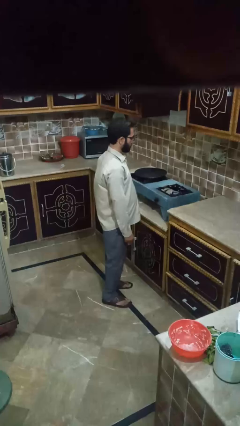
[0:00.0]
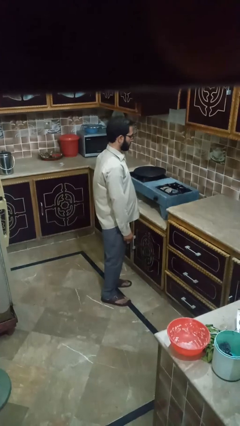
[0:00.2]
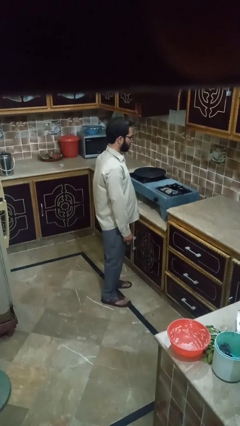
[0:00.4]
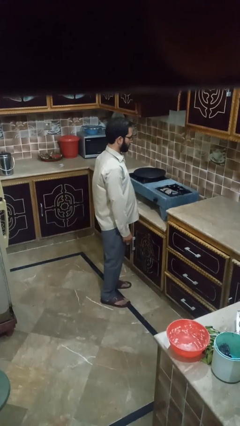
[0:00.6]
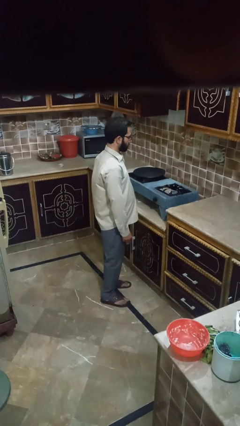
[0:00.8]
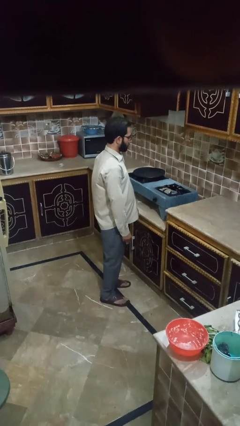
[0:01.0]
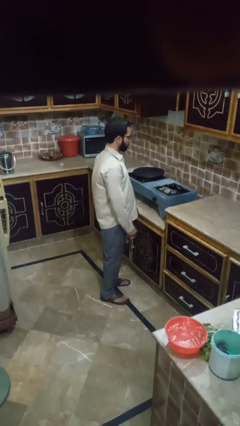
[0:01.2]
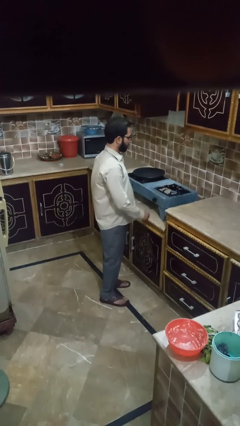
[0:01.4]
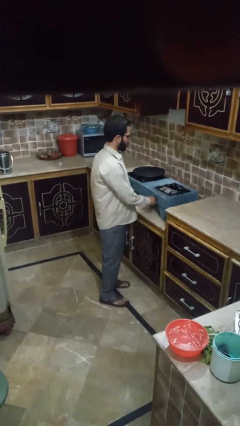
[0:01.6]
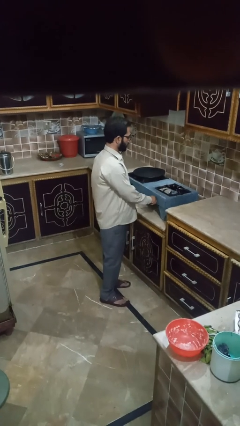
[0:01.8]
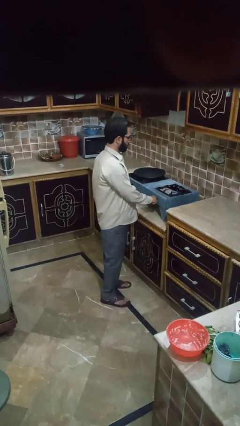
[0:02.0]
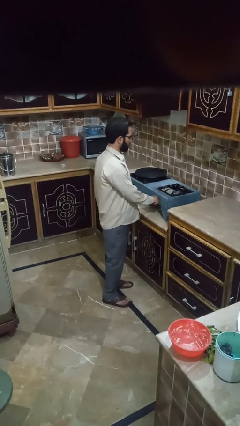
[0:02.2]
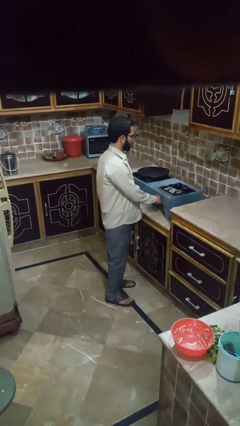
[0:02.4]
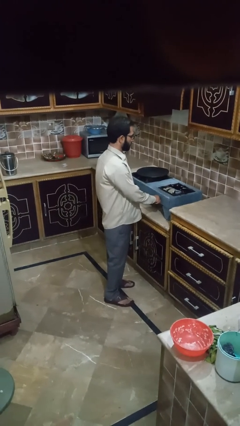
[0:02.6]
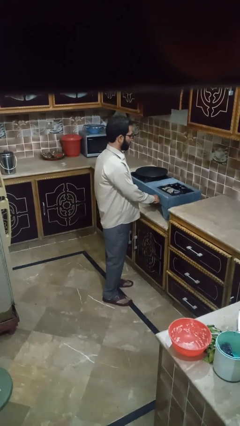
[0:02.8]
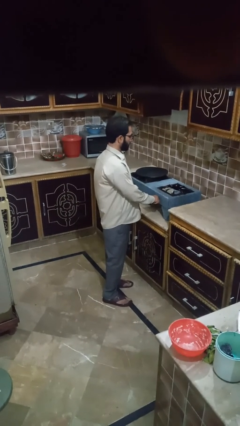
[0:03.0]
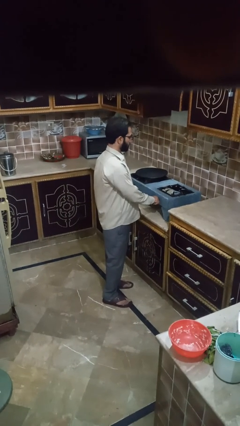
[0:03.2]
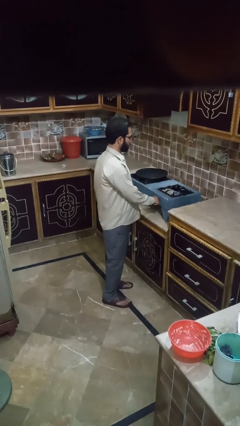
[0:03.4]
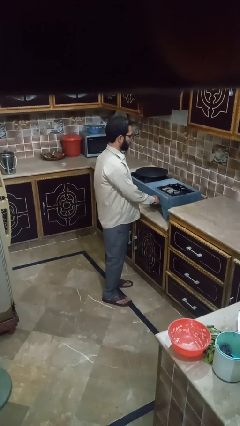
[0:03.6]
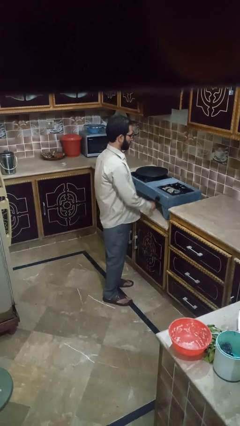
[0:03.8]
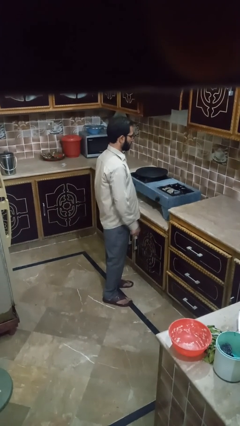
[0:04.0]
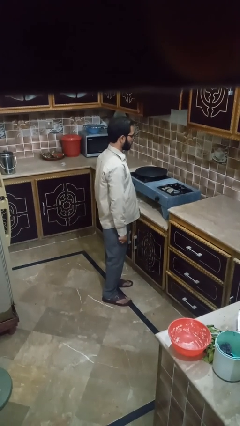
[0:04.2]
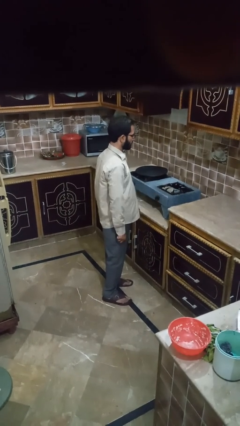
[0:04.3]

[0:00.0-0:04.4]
person turns on stovetop

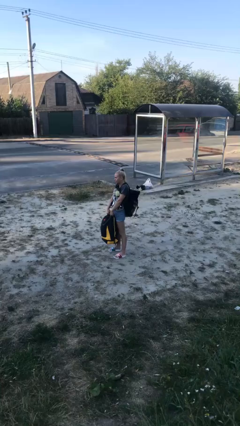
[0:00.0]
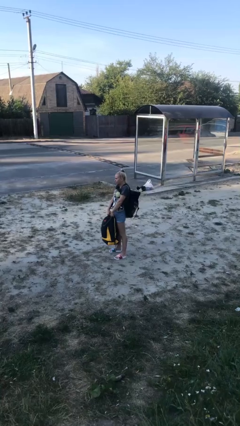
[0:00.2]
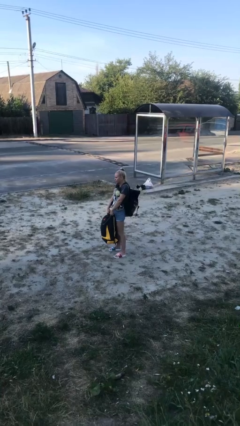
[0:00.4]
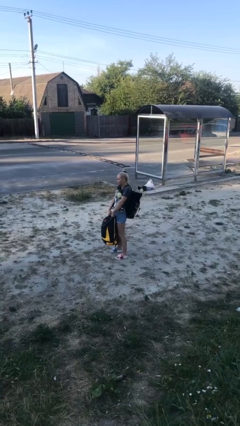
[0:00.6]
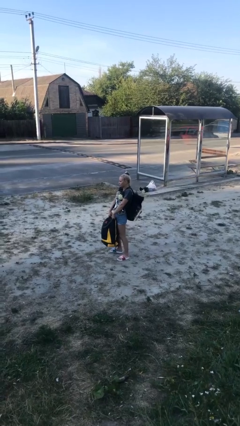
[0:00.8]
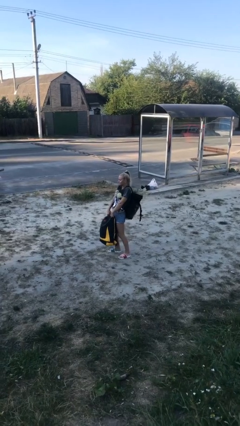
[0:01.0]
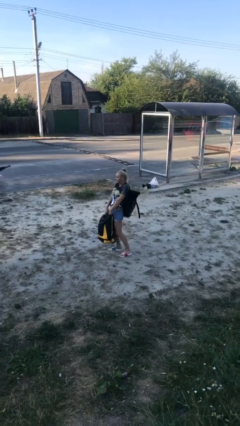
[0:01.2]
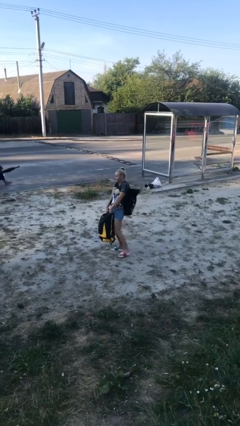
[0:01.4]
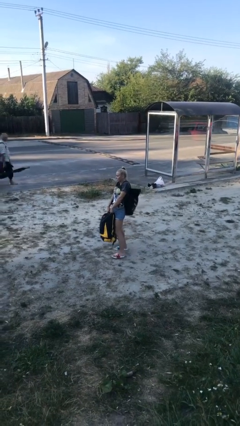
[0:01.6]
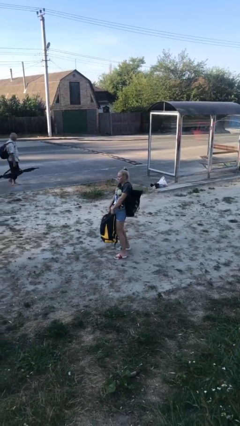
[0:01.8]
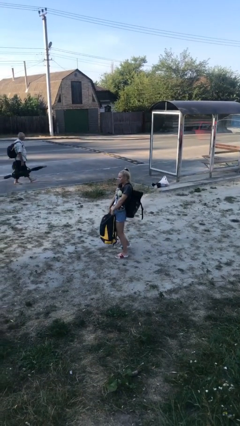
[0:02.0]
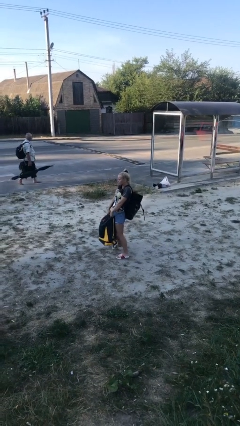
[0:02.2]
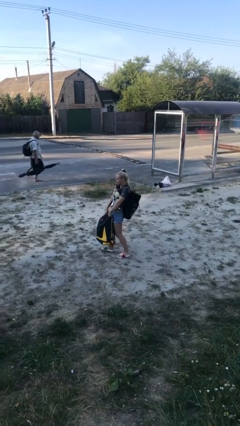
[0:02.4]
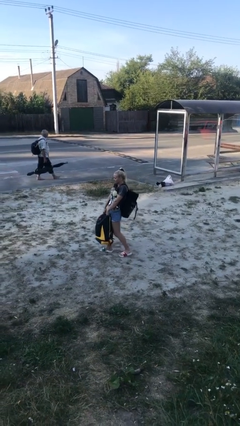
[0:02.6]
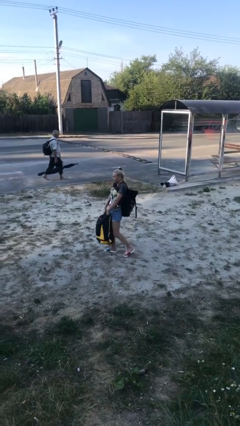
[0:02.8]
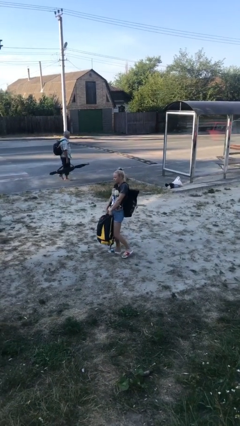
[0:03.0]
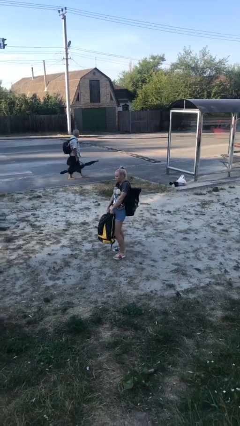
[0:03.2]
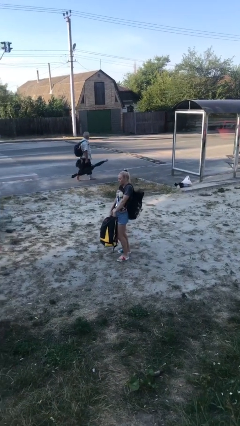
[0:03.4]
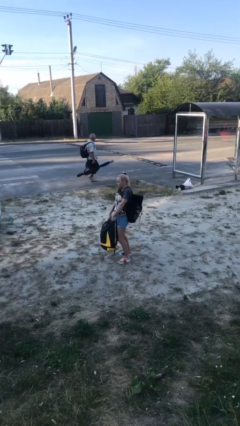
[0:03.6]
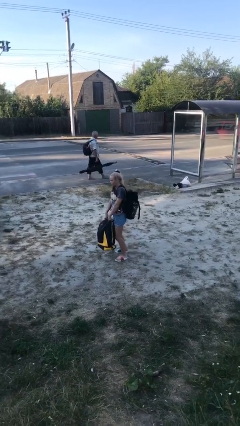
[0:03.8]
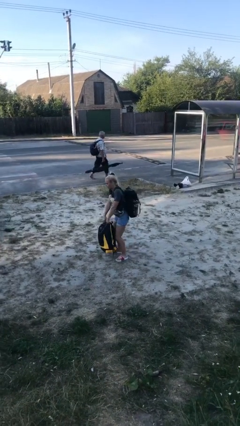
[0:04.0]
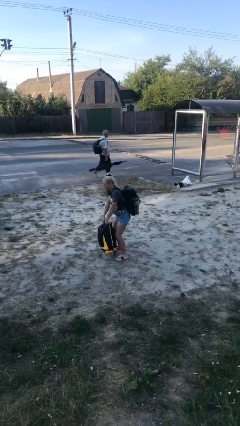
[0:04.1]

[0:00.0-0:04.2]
person carries heavy object

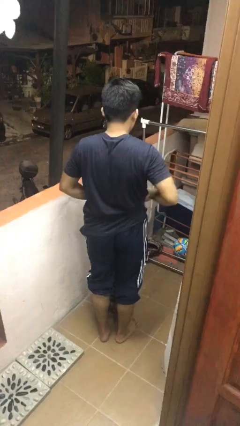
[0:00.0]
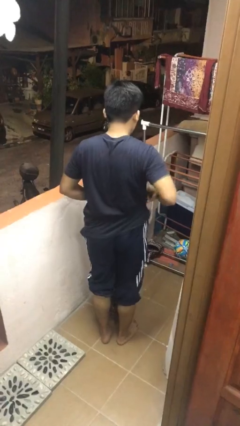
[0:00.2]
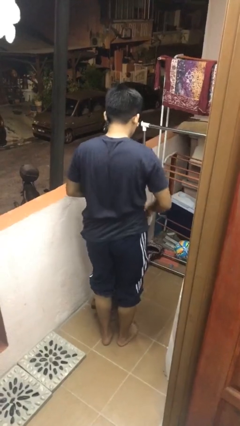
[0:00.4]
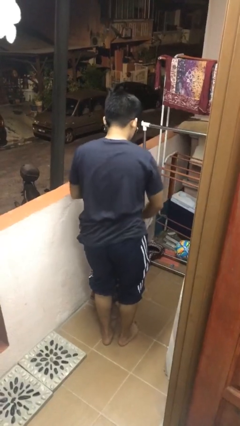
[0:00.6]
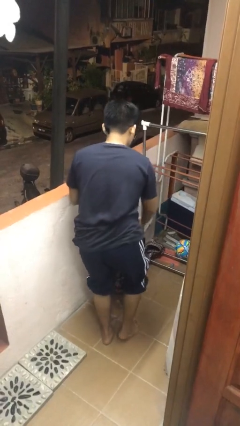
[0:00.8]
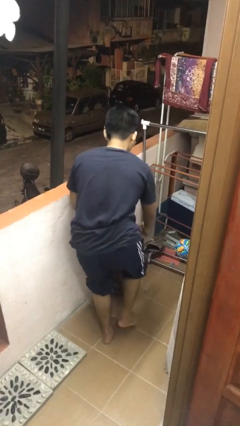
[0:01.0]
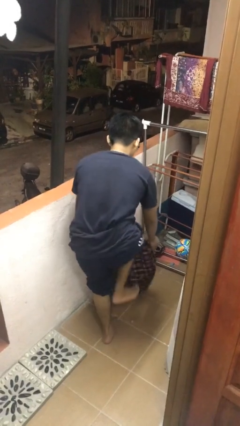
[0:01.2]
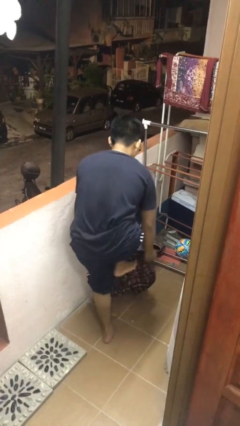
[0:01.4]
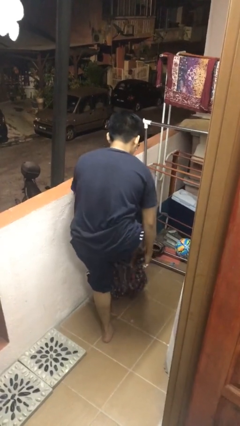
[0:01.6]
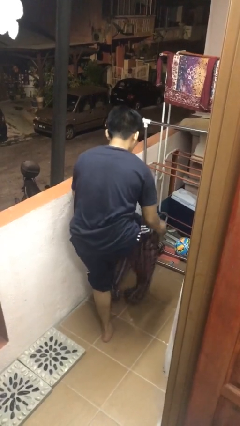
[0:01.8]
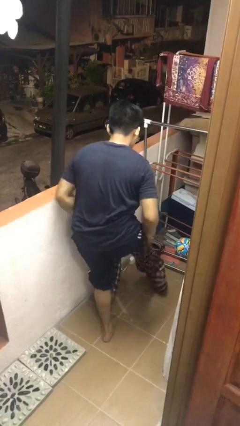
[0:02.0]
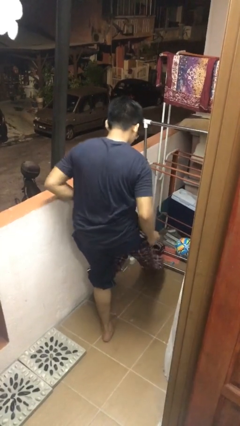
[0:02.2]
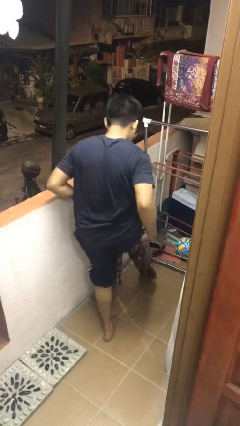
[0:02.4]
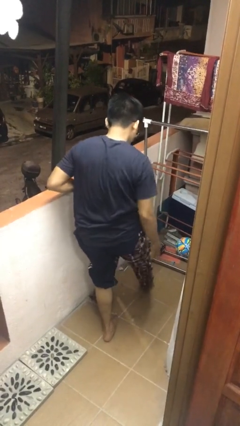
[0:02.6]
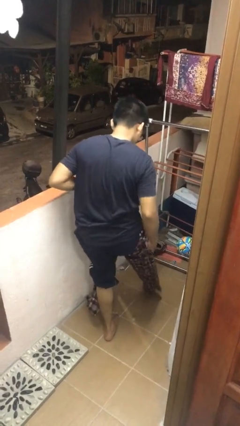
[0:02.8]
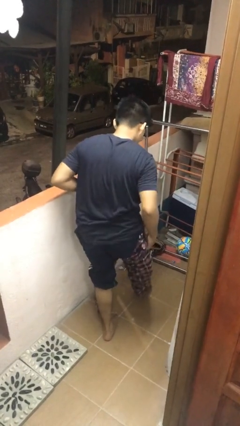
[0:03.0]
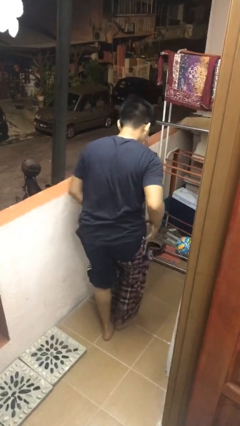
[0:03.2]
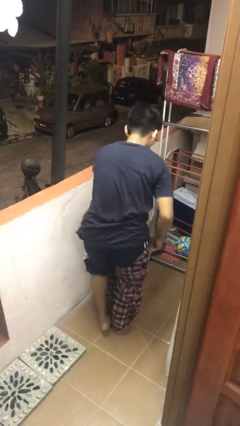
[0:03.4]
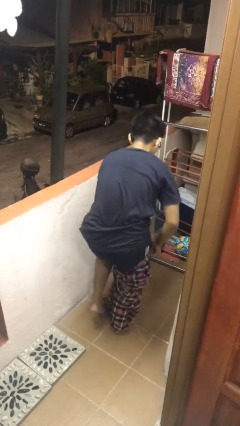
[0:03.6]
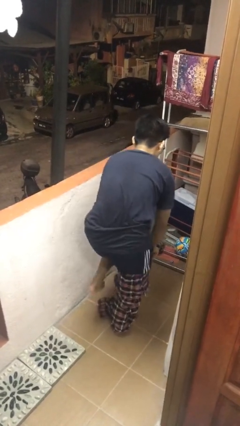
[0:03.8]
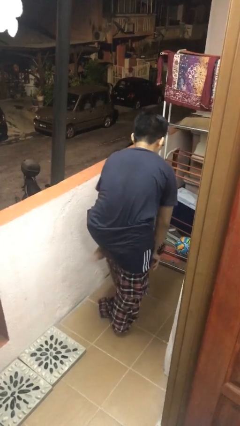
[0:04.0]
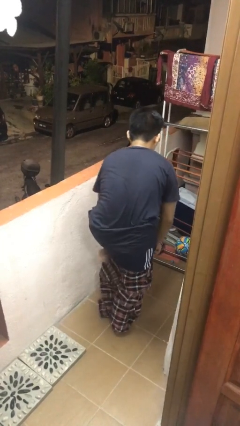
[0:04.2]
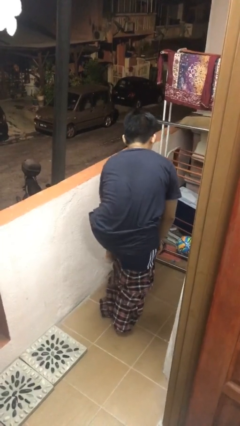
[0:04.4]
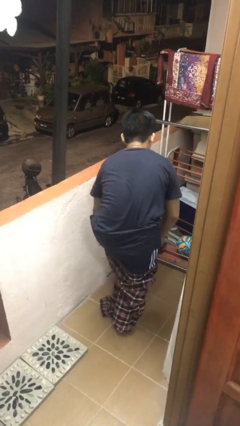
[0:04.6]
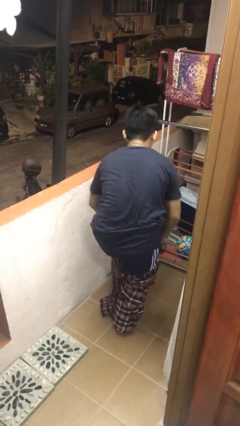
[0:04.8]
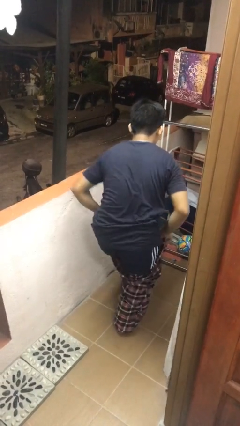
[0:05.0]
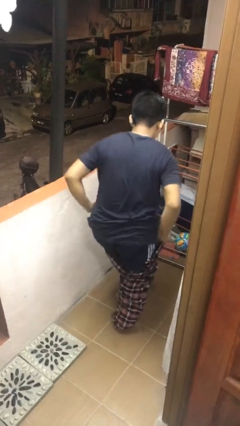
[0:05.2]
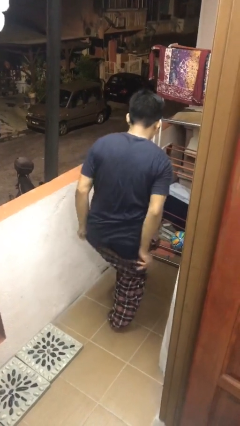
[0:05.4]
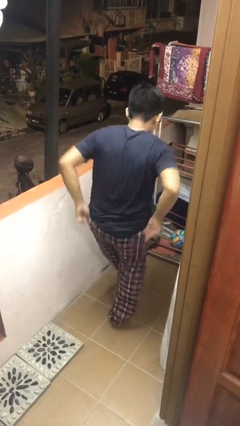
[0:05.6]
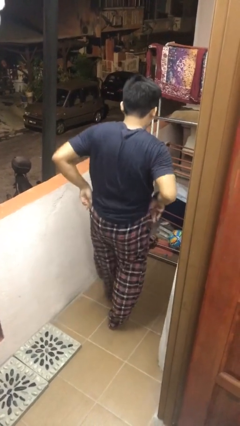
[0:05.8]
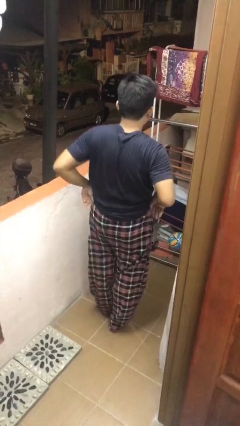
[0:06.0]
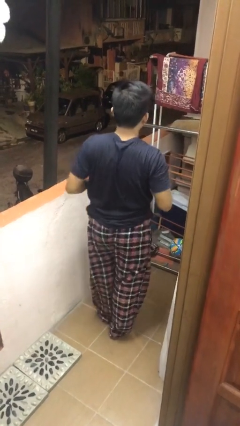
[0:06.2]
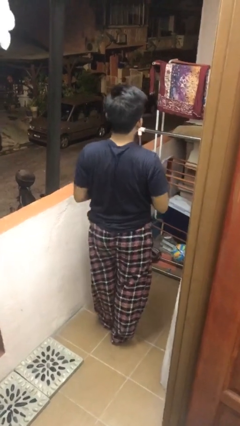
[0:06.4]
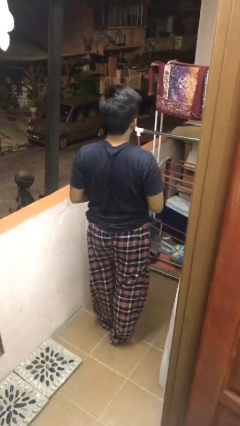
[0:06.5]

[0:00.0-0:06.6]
person puts on pants

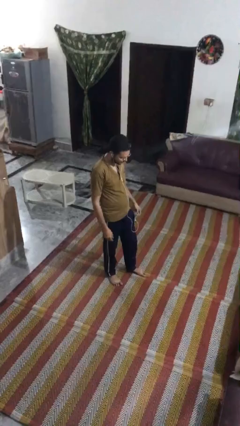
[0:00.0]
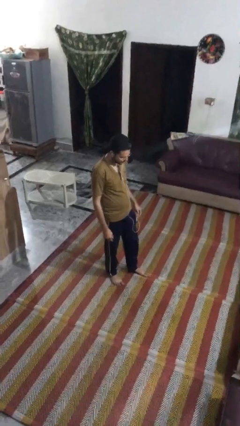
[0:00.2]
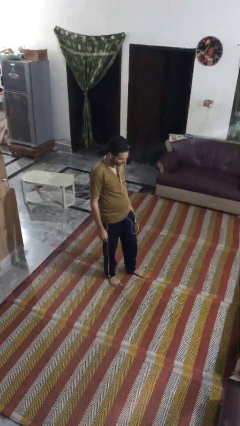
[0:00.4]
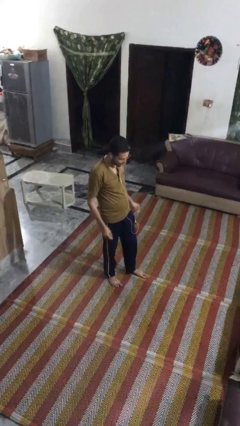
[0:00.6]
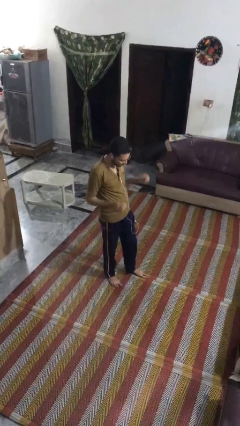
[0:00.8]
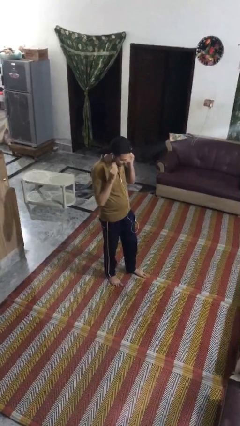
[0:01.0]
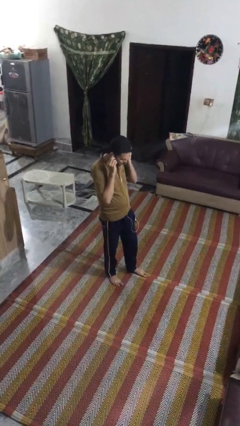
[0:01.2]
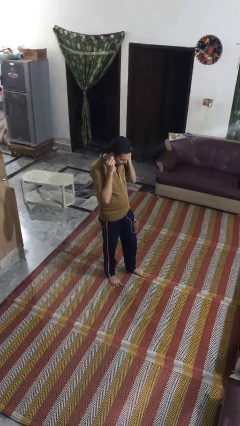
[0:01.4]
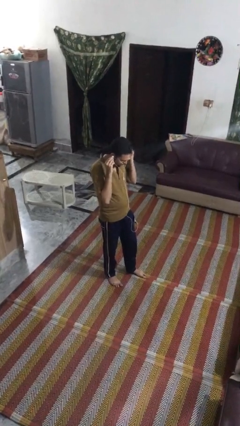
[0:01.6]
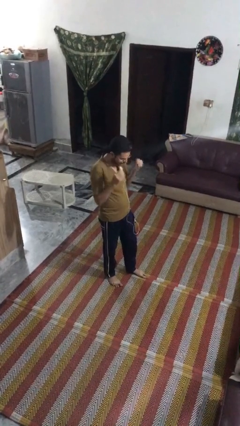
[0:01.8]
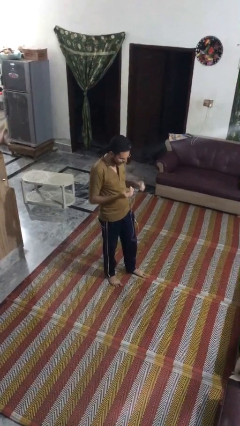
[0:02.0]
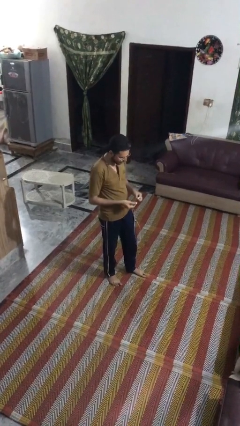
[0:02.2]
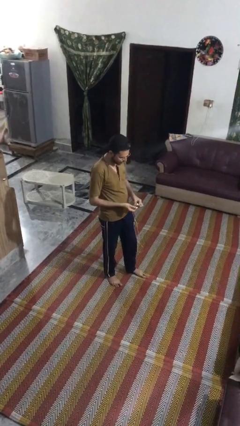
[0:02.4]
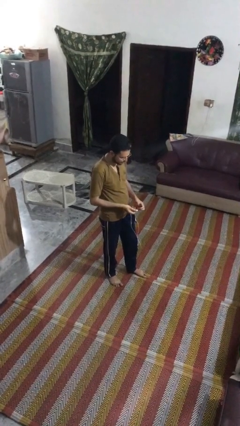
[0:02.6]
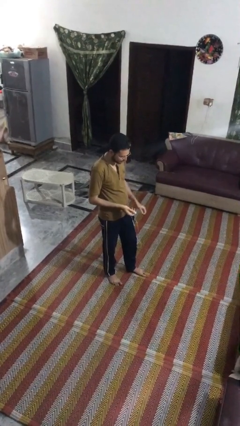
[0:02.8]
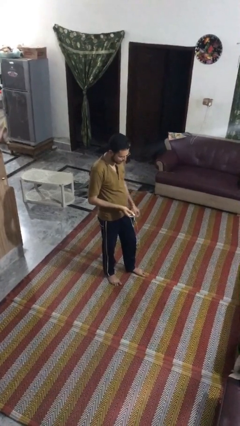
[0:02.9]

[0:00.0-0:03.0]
person takes off headphones
